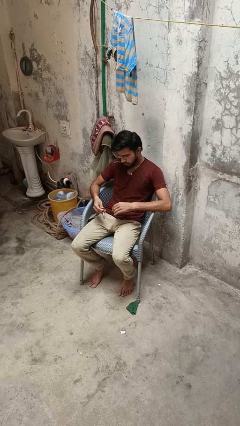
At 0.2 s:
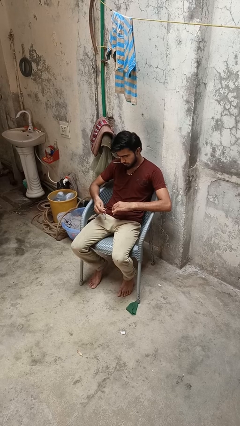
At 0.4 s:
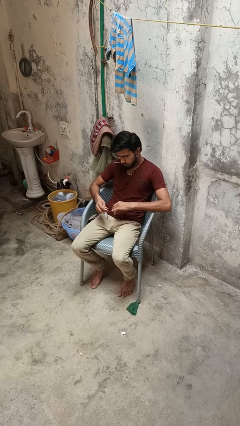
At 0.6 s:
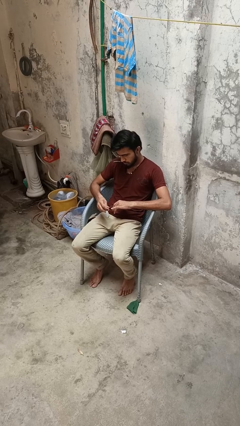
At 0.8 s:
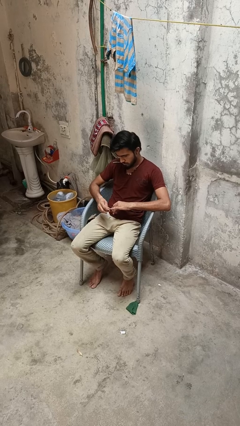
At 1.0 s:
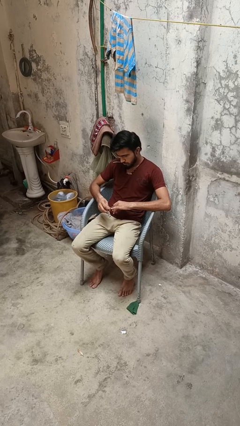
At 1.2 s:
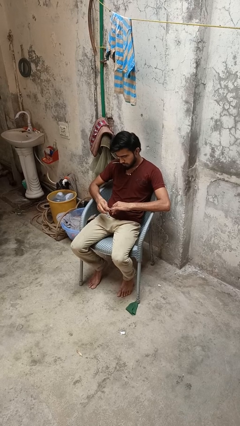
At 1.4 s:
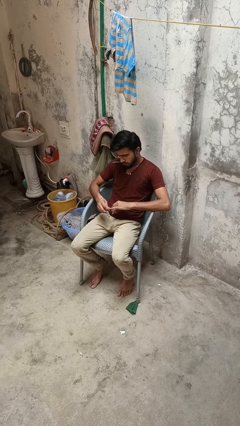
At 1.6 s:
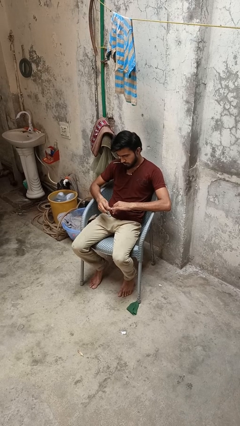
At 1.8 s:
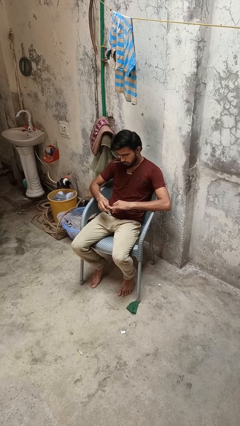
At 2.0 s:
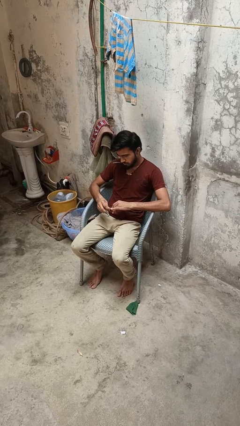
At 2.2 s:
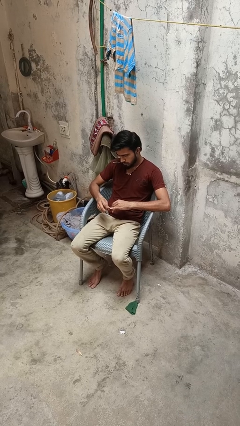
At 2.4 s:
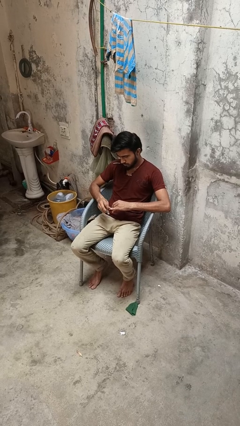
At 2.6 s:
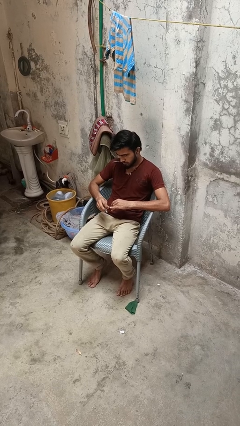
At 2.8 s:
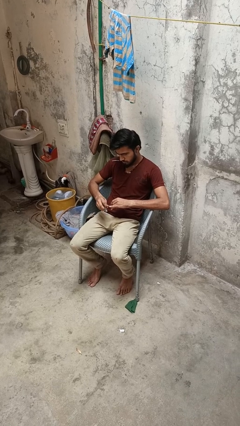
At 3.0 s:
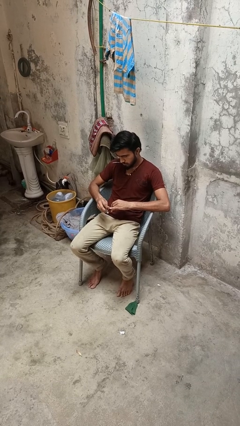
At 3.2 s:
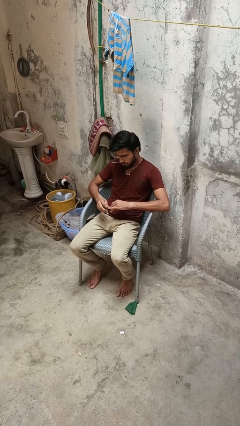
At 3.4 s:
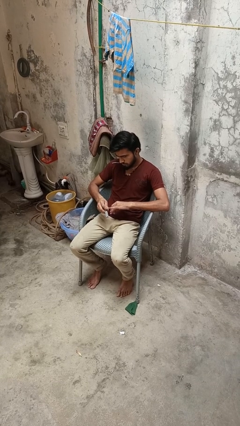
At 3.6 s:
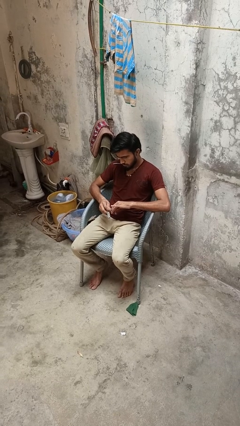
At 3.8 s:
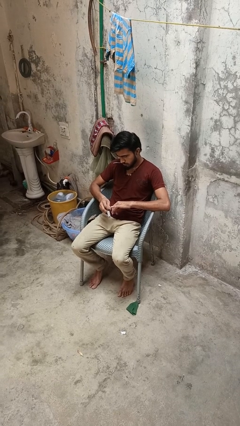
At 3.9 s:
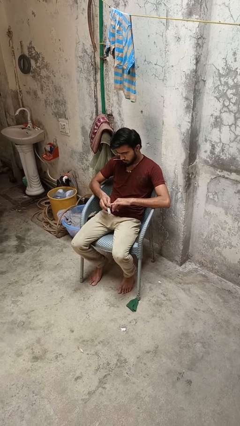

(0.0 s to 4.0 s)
person files fingernails

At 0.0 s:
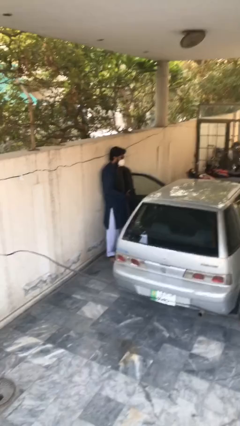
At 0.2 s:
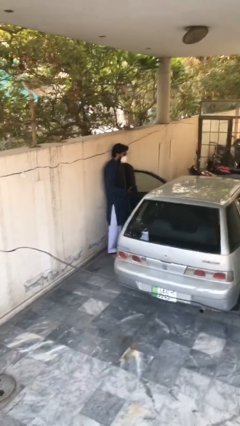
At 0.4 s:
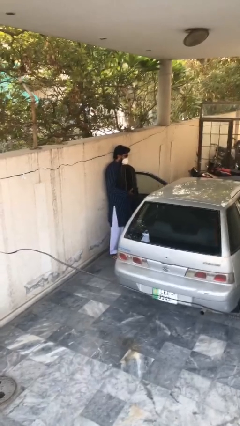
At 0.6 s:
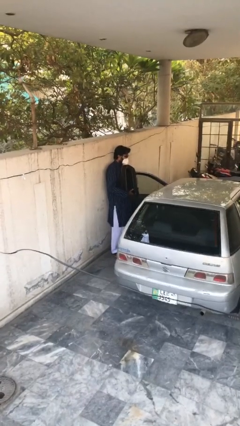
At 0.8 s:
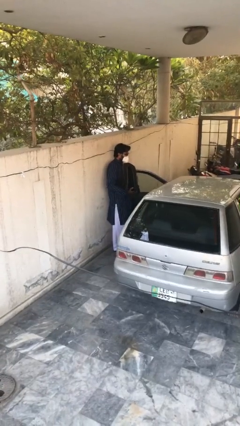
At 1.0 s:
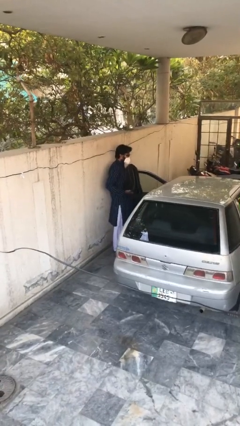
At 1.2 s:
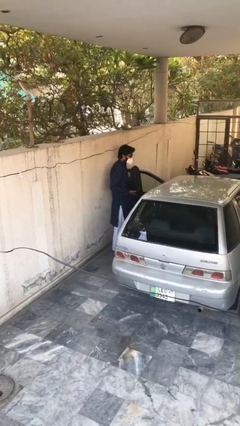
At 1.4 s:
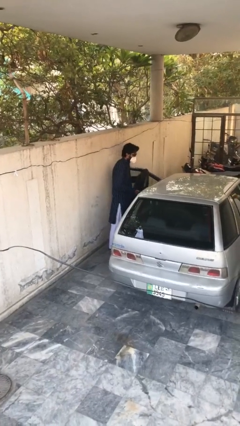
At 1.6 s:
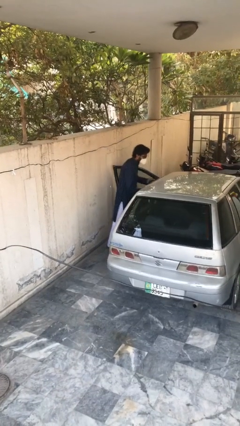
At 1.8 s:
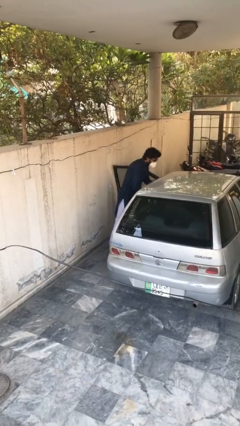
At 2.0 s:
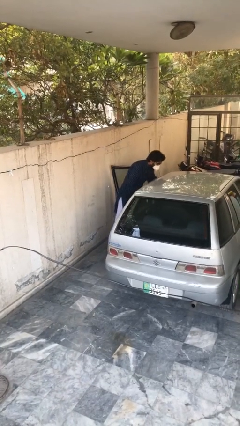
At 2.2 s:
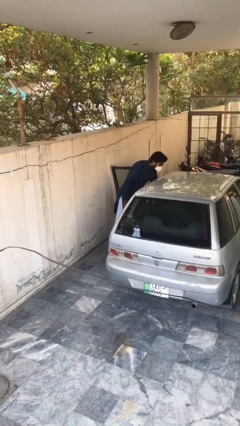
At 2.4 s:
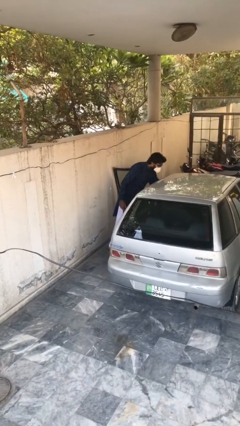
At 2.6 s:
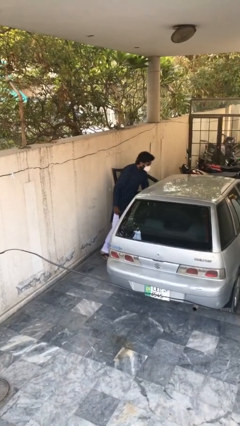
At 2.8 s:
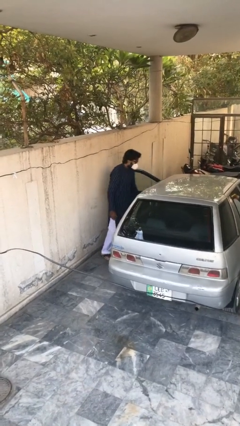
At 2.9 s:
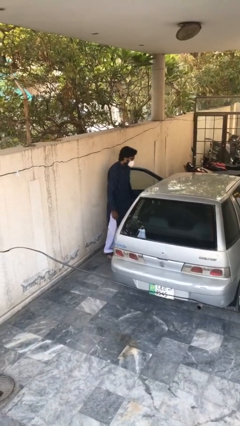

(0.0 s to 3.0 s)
person loads car

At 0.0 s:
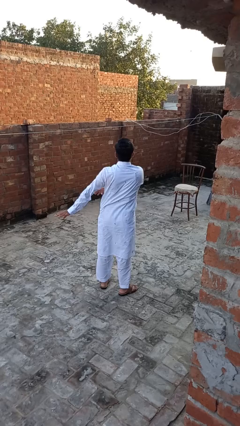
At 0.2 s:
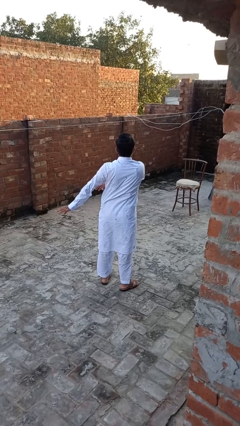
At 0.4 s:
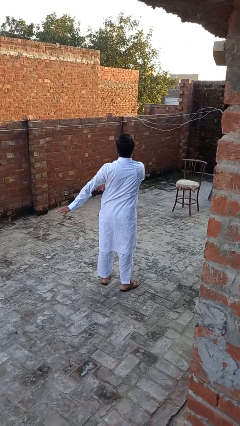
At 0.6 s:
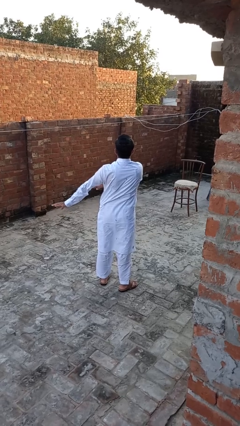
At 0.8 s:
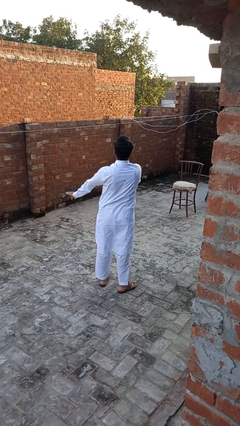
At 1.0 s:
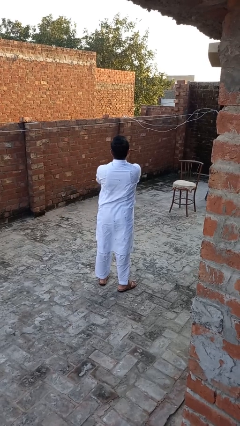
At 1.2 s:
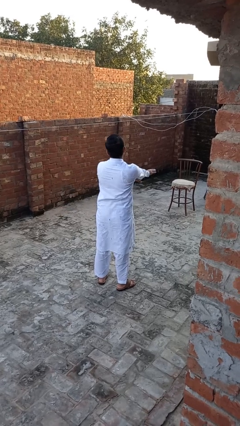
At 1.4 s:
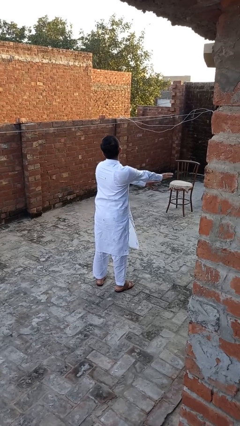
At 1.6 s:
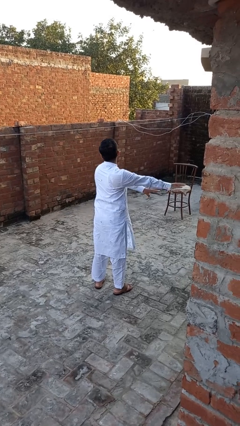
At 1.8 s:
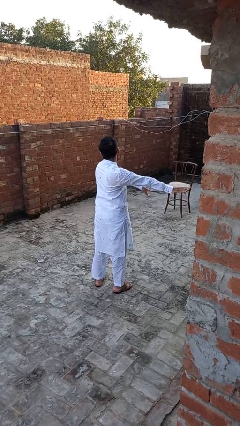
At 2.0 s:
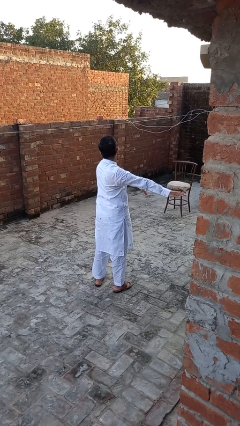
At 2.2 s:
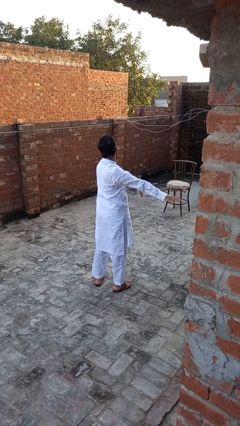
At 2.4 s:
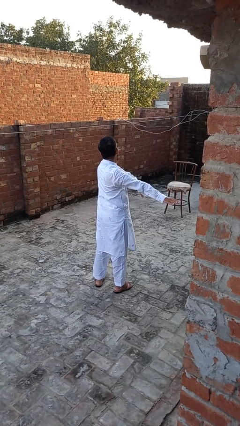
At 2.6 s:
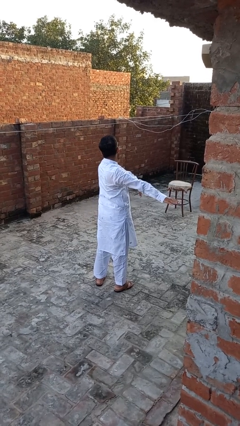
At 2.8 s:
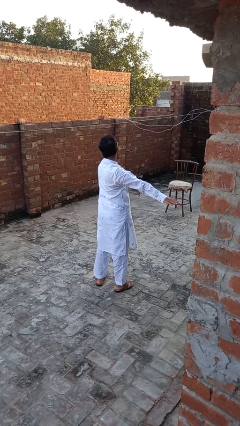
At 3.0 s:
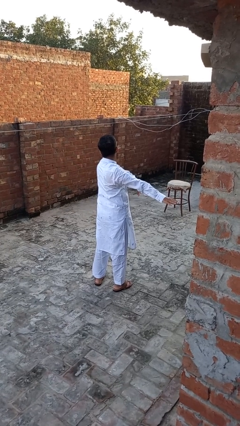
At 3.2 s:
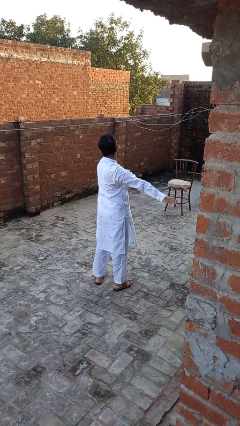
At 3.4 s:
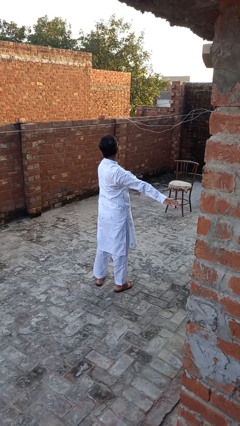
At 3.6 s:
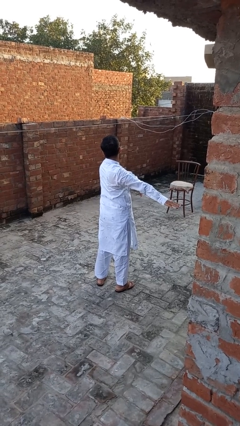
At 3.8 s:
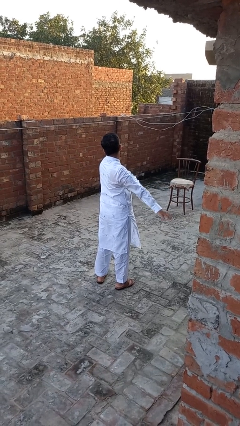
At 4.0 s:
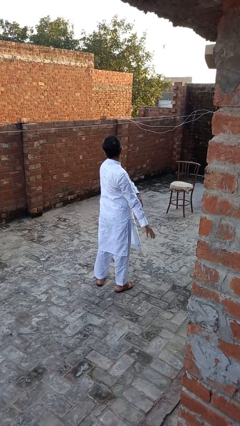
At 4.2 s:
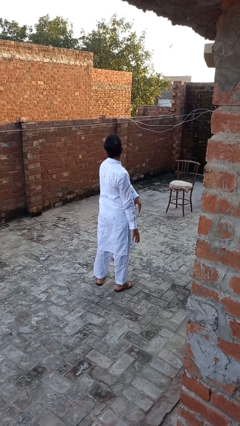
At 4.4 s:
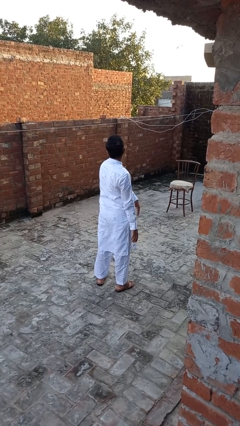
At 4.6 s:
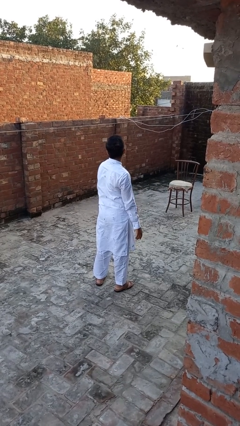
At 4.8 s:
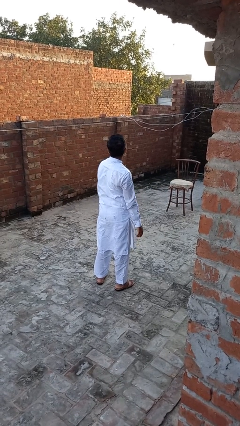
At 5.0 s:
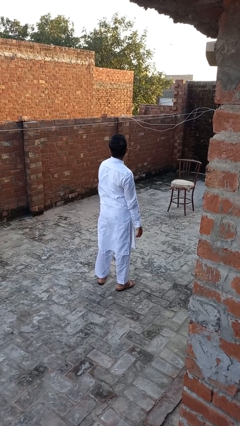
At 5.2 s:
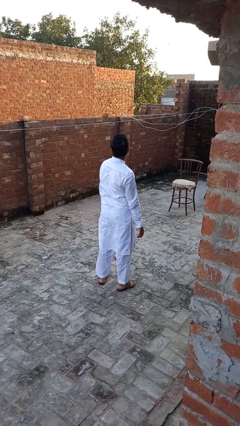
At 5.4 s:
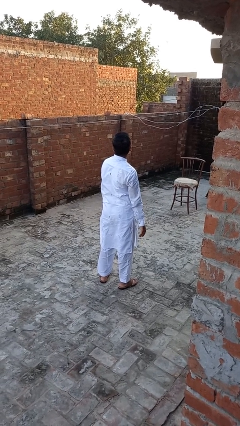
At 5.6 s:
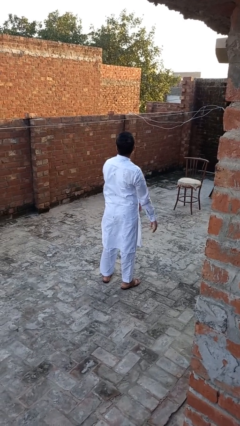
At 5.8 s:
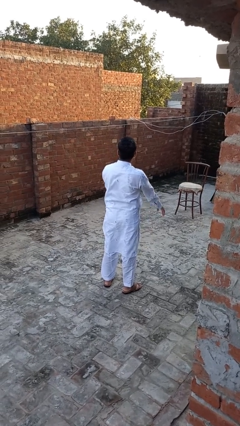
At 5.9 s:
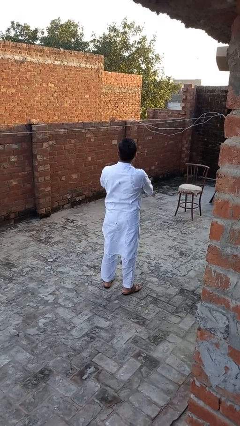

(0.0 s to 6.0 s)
person gestures swipe right

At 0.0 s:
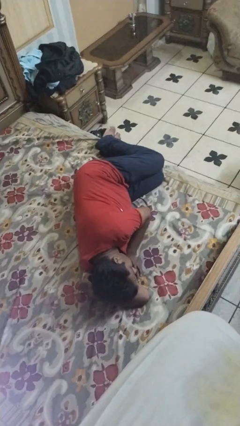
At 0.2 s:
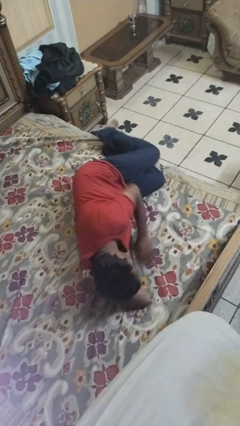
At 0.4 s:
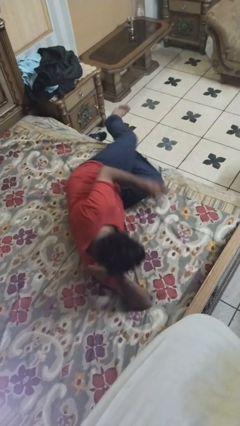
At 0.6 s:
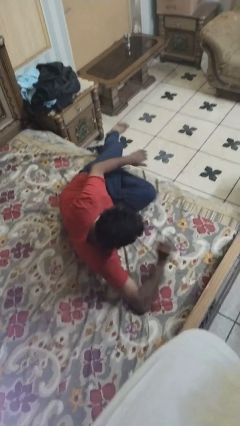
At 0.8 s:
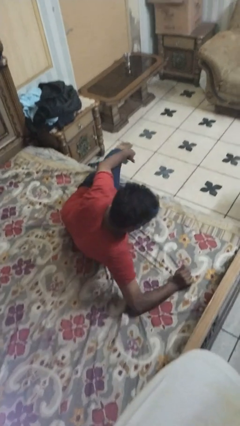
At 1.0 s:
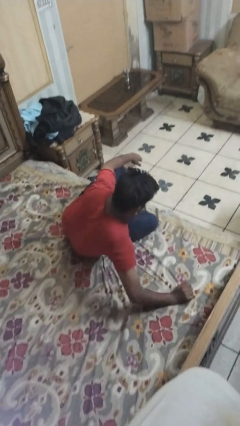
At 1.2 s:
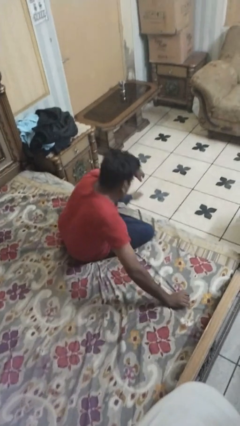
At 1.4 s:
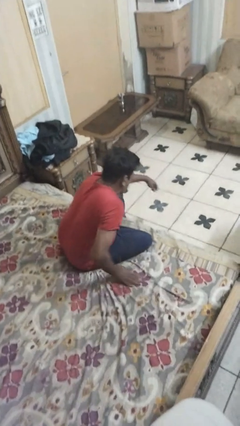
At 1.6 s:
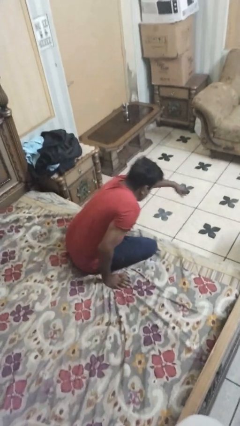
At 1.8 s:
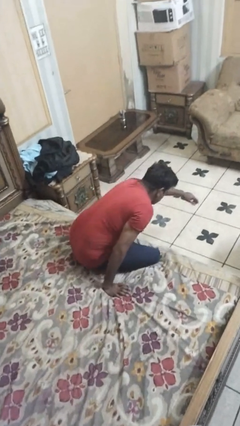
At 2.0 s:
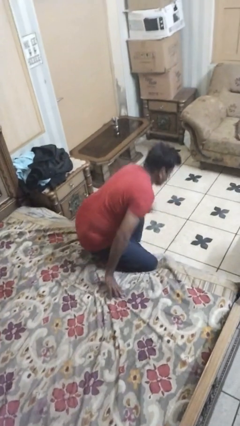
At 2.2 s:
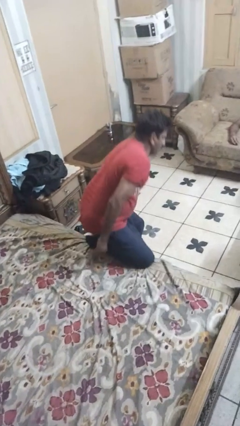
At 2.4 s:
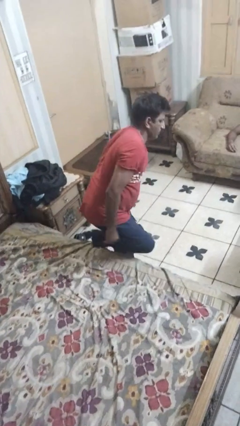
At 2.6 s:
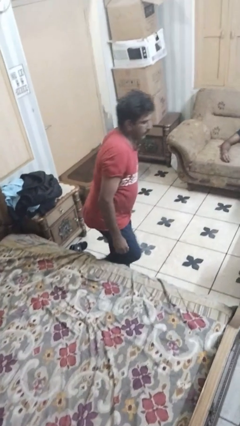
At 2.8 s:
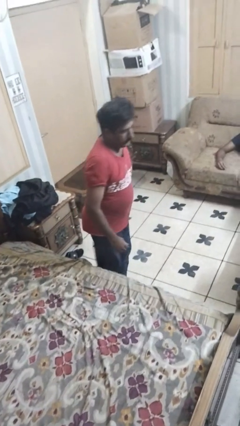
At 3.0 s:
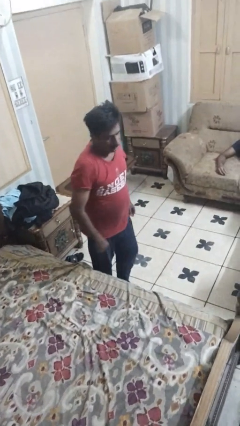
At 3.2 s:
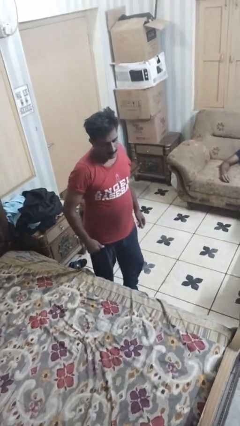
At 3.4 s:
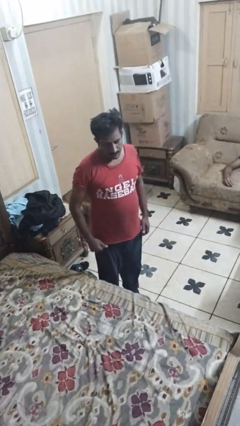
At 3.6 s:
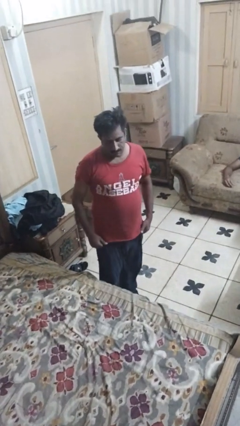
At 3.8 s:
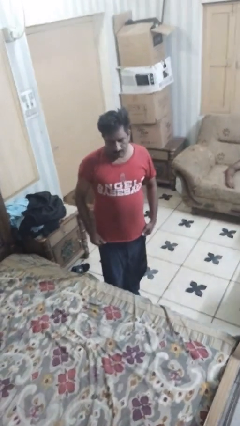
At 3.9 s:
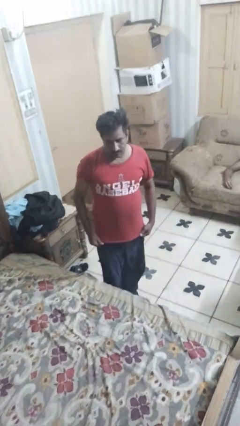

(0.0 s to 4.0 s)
person stands up

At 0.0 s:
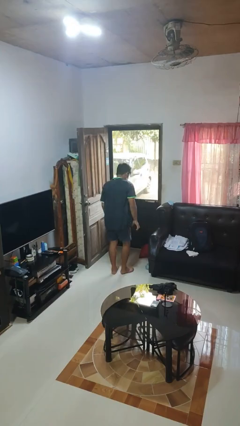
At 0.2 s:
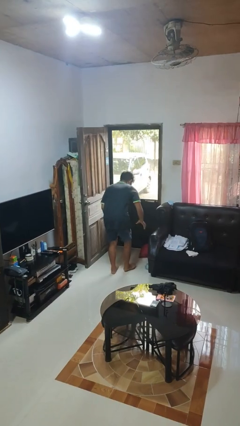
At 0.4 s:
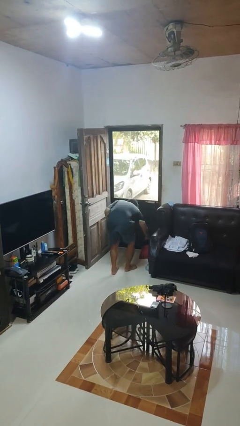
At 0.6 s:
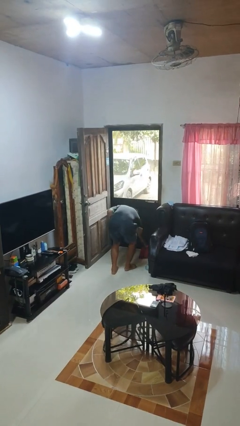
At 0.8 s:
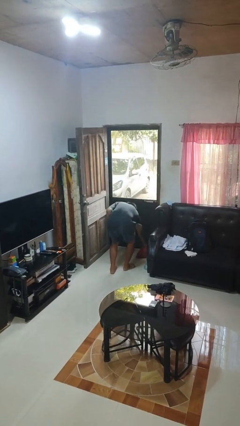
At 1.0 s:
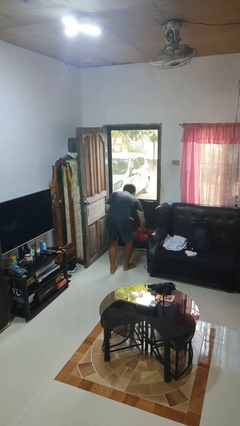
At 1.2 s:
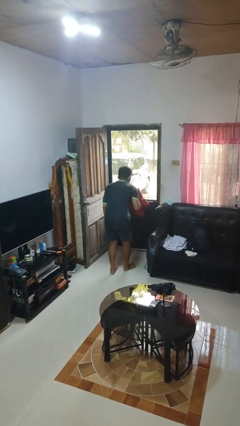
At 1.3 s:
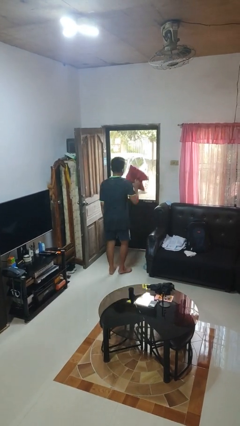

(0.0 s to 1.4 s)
person picks up object from floor
